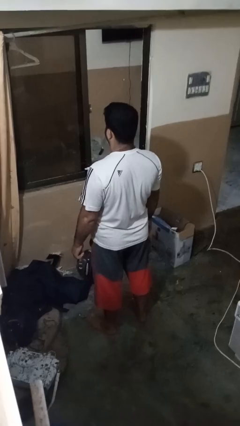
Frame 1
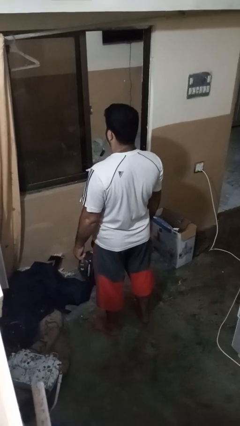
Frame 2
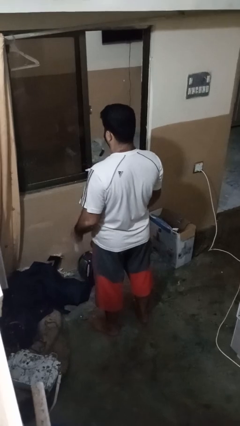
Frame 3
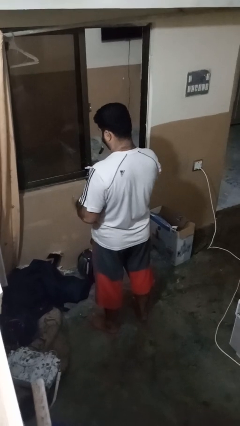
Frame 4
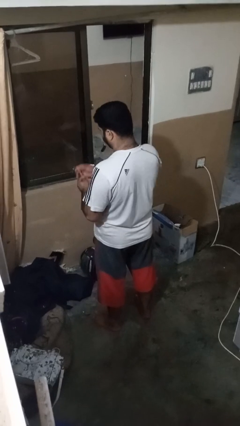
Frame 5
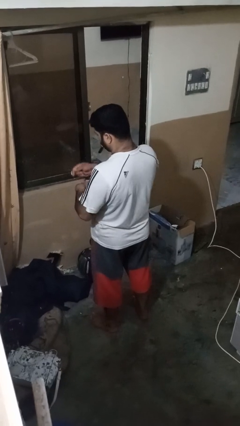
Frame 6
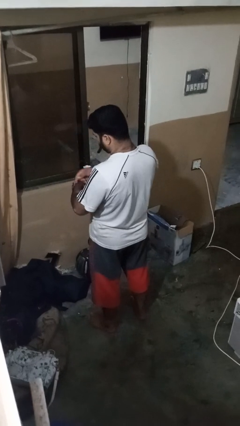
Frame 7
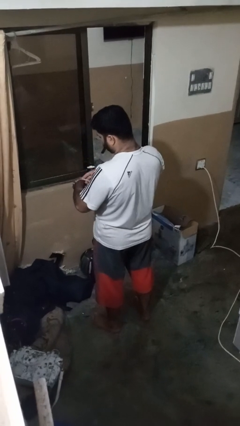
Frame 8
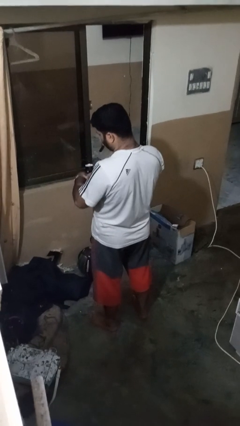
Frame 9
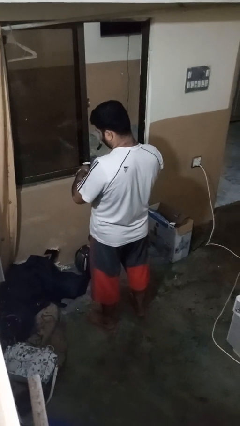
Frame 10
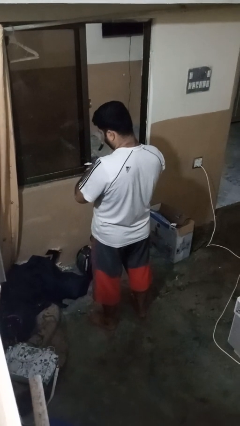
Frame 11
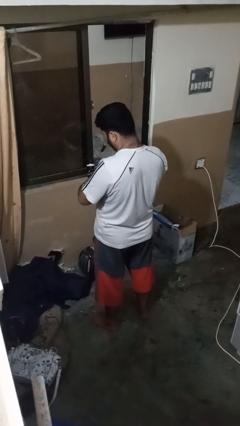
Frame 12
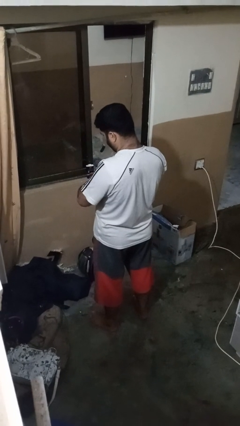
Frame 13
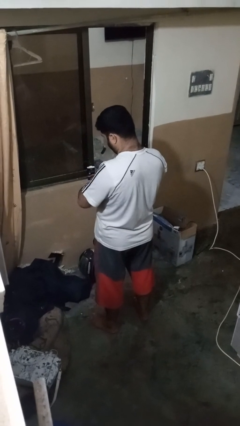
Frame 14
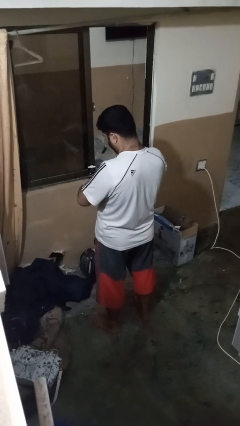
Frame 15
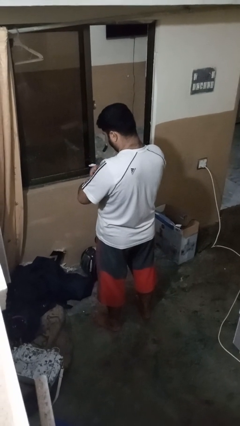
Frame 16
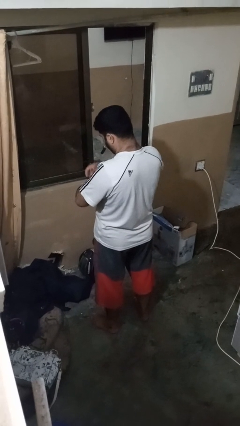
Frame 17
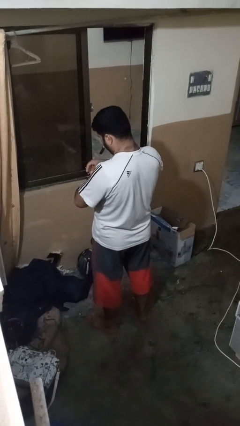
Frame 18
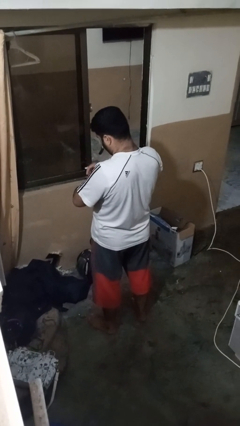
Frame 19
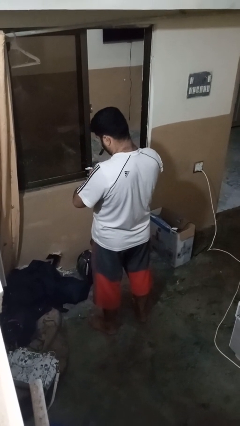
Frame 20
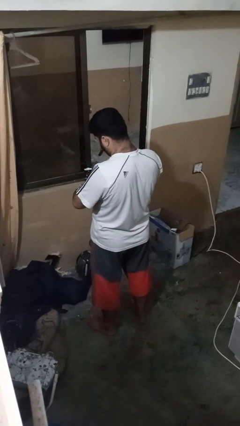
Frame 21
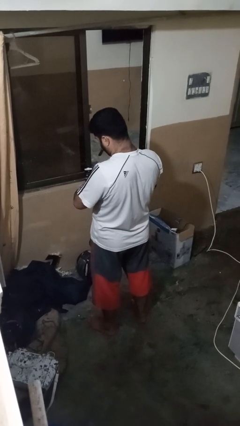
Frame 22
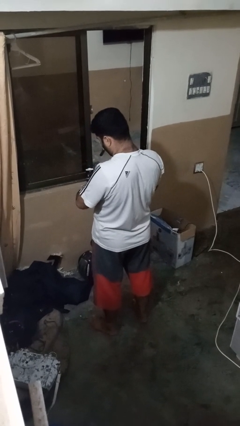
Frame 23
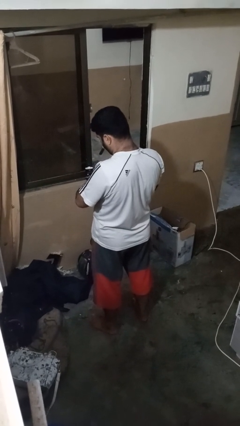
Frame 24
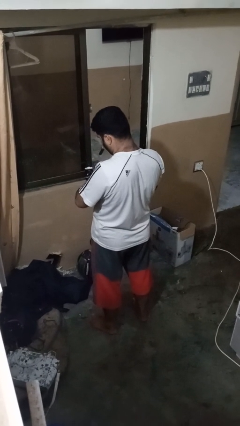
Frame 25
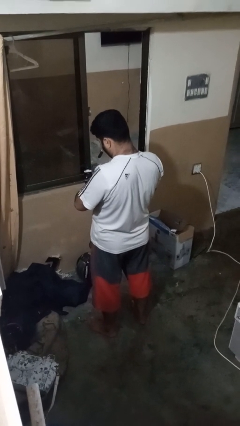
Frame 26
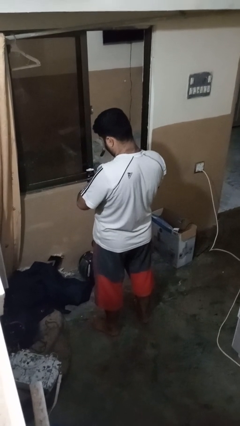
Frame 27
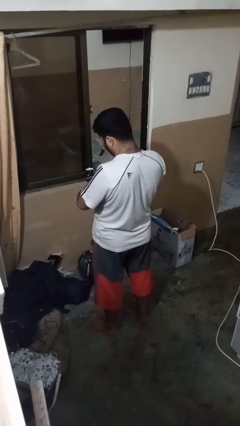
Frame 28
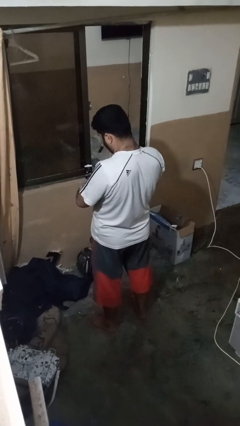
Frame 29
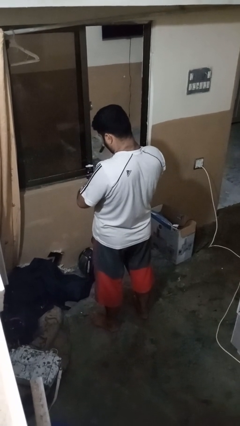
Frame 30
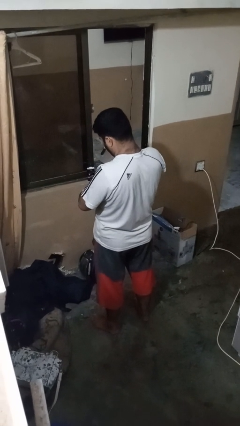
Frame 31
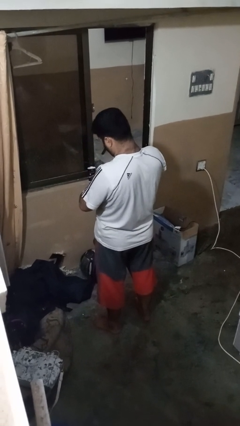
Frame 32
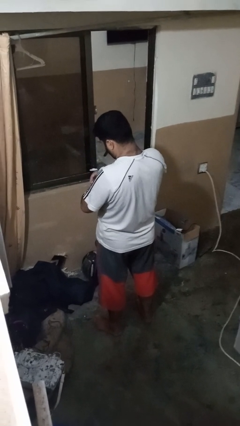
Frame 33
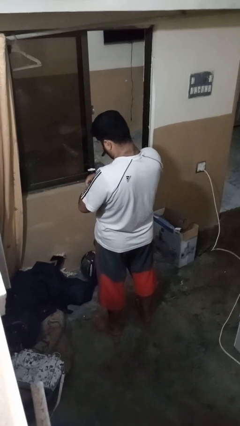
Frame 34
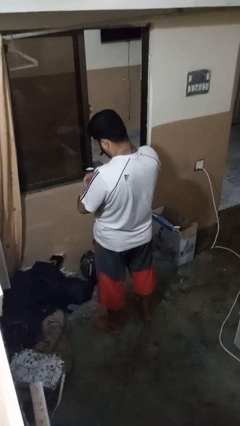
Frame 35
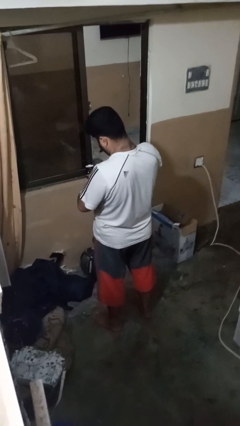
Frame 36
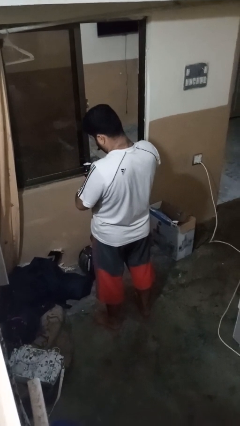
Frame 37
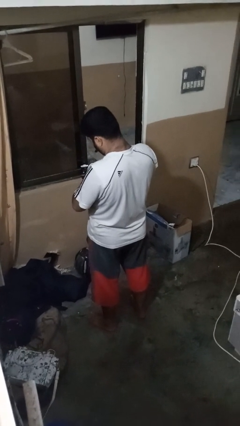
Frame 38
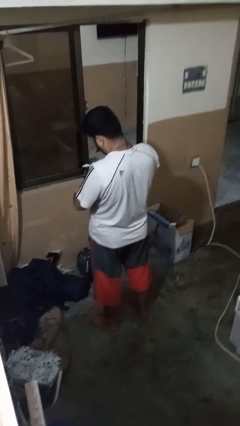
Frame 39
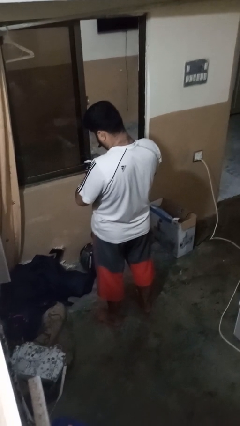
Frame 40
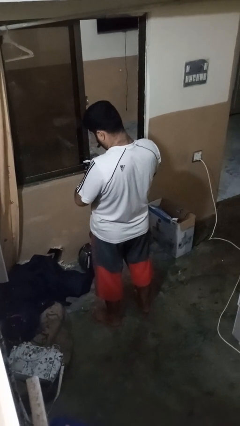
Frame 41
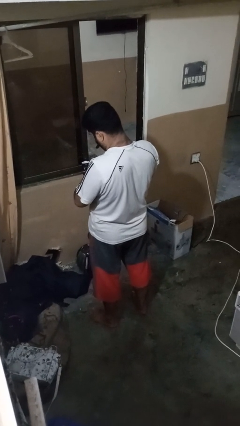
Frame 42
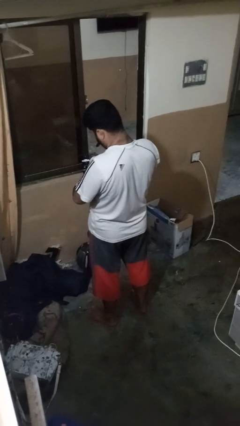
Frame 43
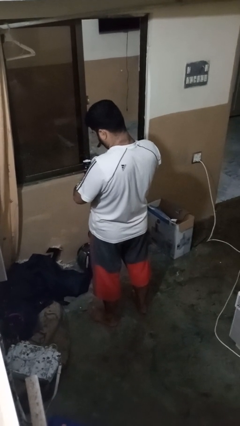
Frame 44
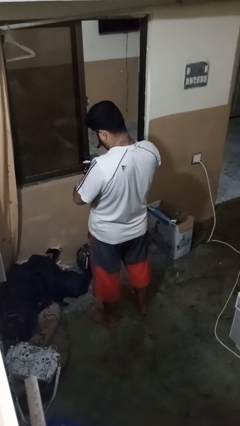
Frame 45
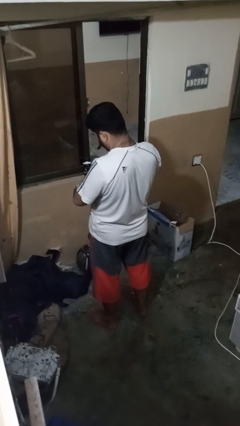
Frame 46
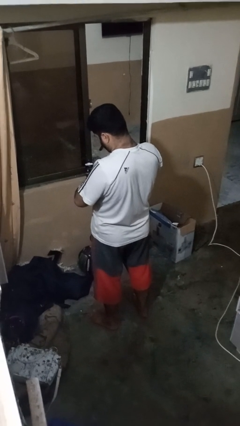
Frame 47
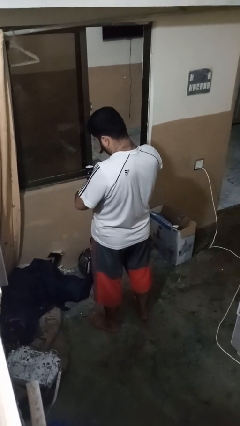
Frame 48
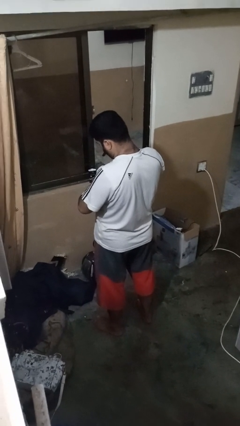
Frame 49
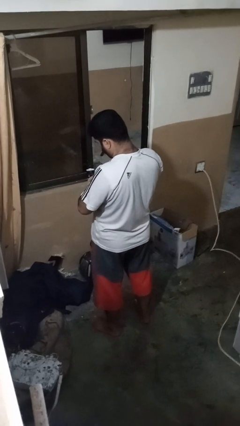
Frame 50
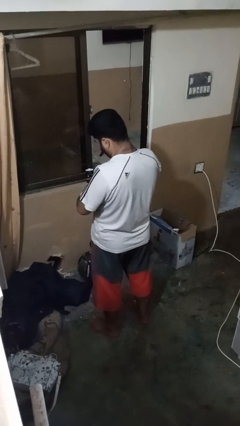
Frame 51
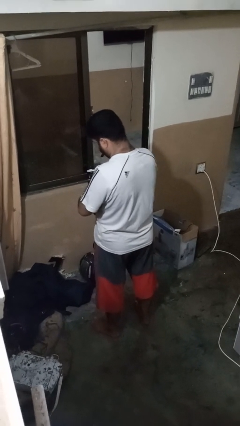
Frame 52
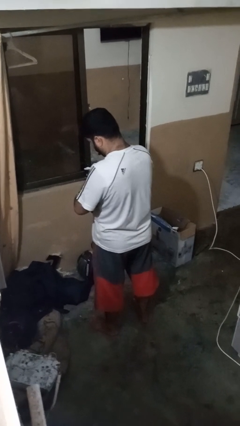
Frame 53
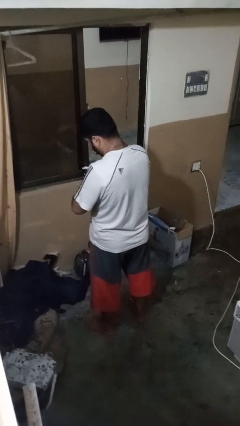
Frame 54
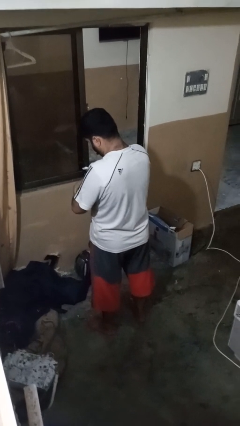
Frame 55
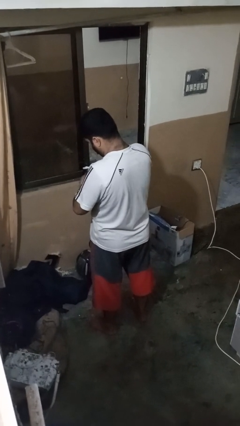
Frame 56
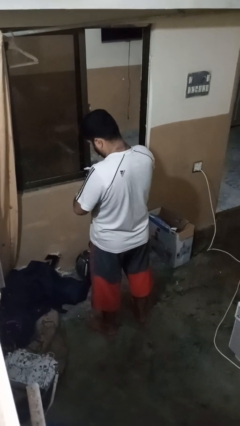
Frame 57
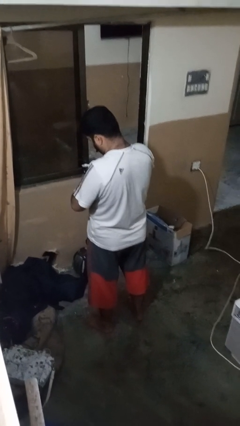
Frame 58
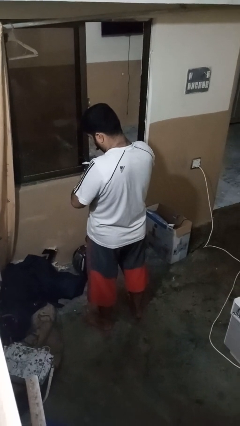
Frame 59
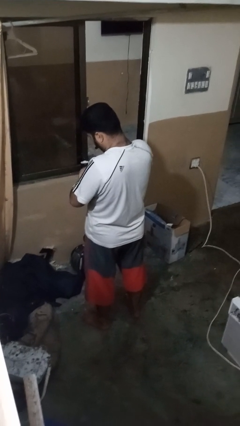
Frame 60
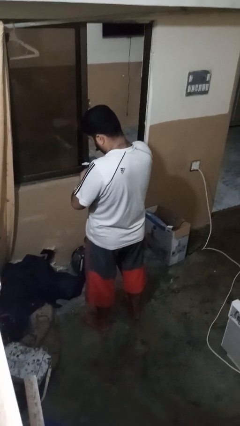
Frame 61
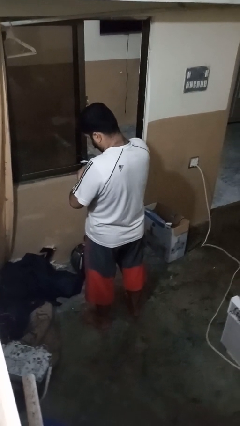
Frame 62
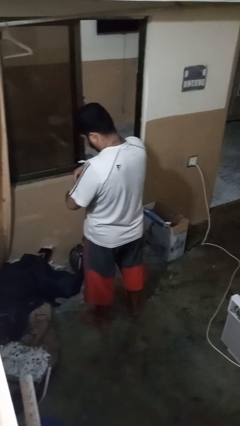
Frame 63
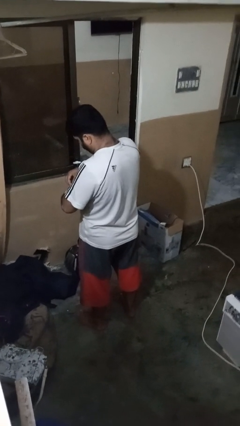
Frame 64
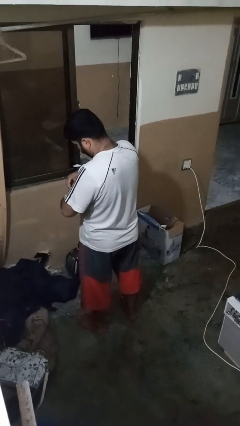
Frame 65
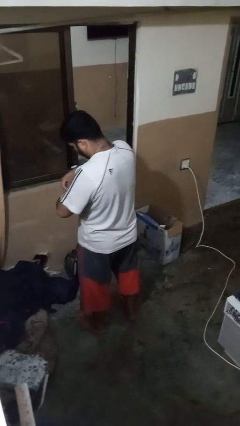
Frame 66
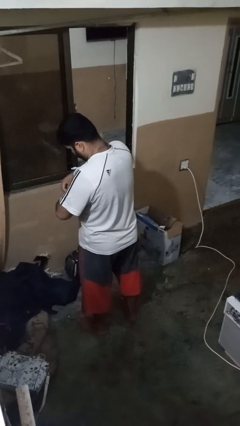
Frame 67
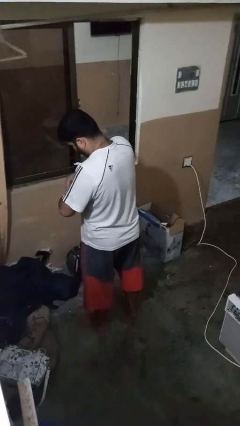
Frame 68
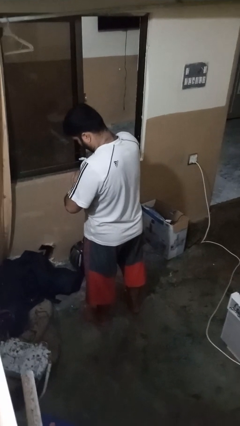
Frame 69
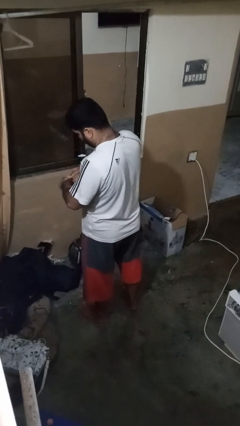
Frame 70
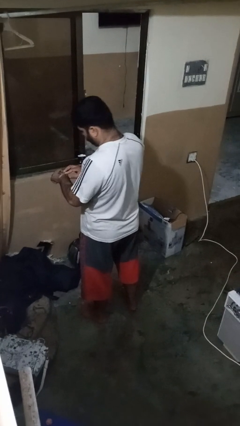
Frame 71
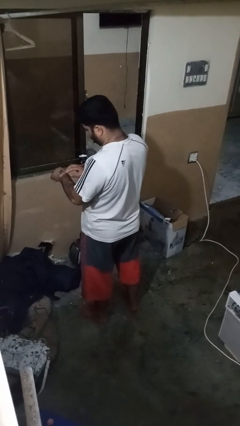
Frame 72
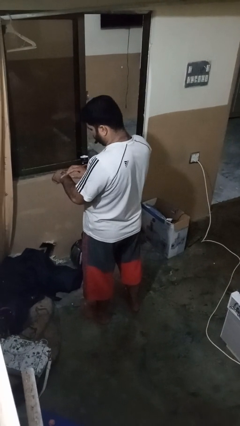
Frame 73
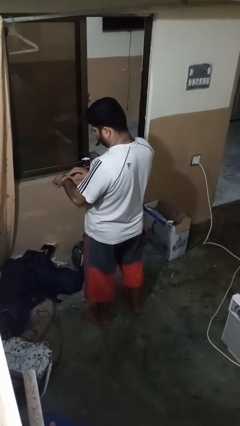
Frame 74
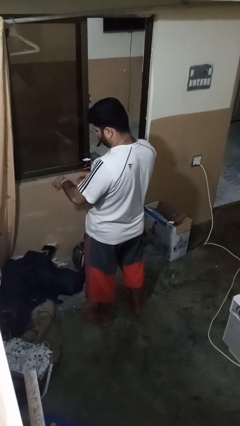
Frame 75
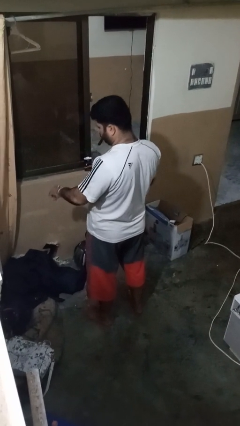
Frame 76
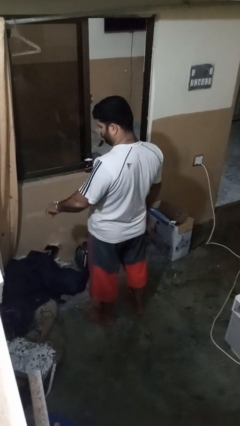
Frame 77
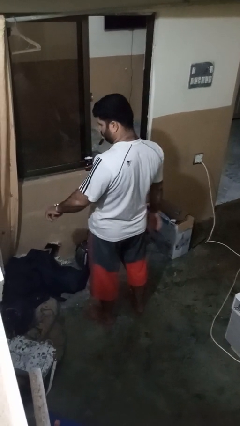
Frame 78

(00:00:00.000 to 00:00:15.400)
person puts on wristwatch

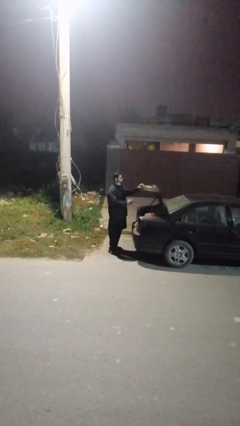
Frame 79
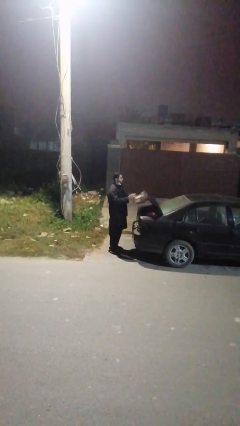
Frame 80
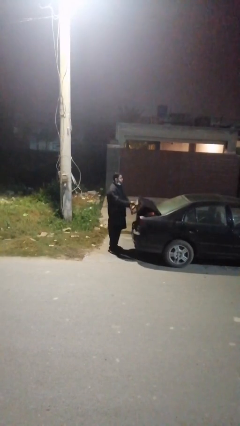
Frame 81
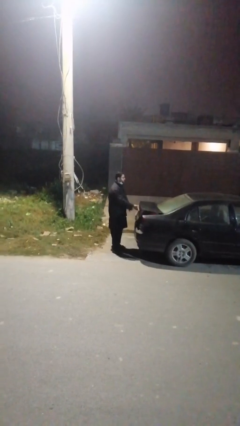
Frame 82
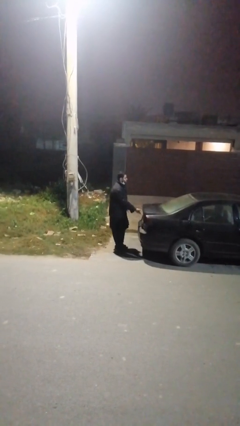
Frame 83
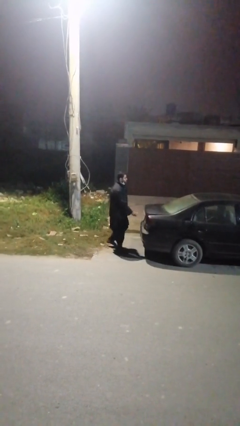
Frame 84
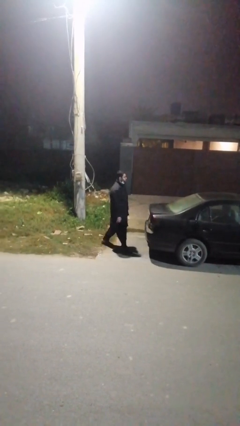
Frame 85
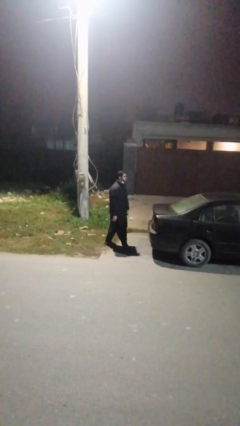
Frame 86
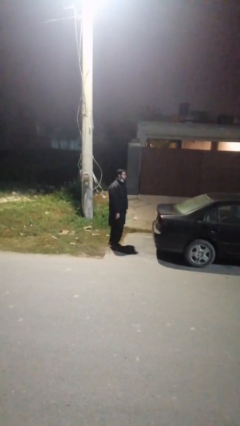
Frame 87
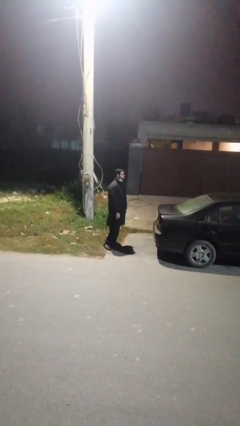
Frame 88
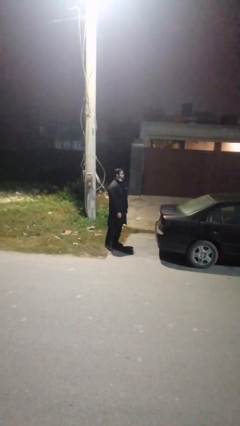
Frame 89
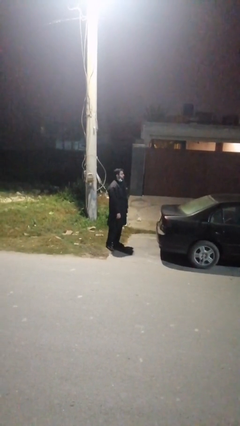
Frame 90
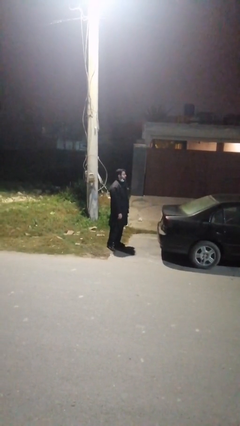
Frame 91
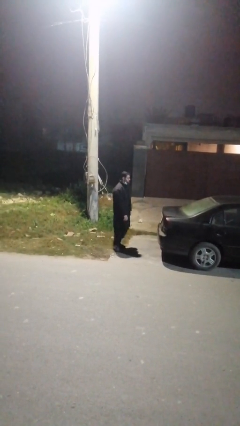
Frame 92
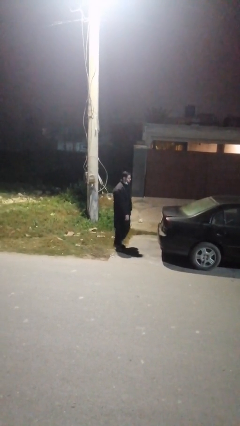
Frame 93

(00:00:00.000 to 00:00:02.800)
person closes car trunk
